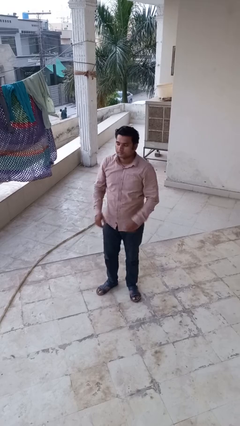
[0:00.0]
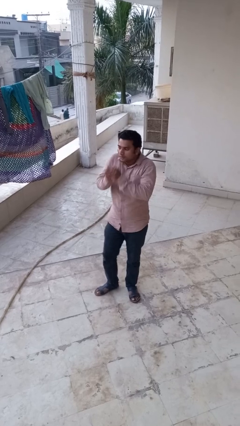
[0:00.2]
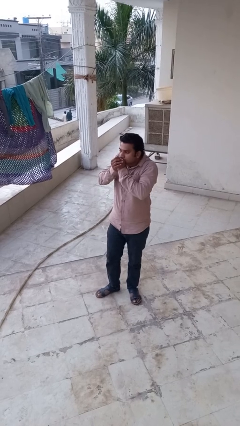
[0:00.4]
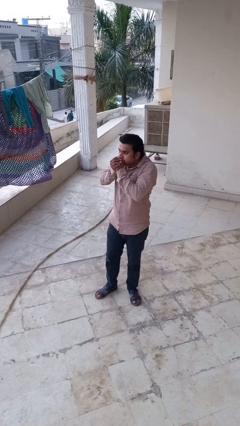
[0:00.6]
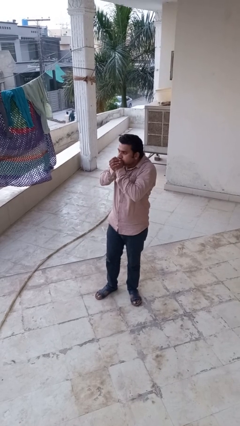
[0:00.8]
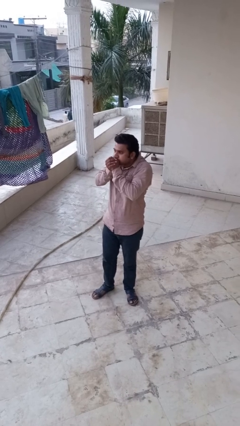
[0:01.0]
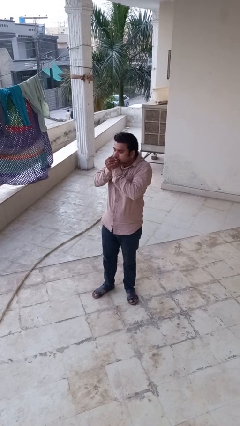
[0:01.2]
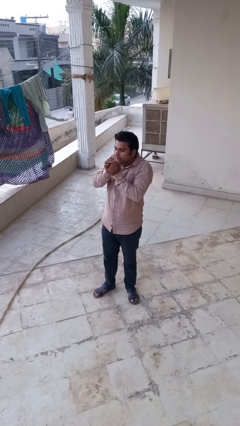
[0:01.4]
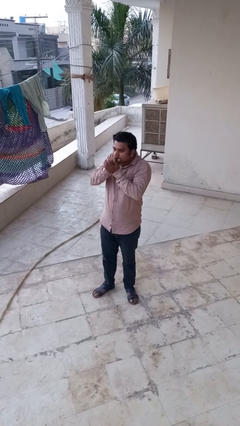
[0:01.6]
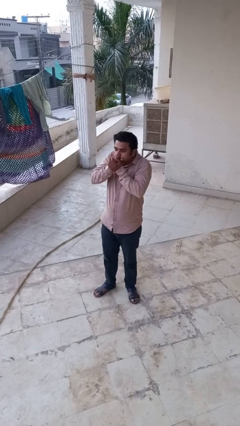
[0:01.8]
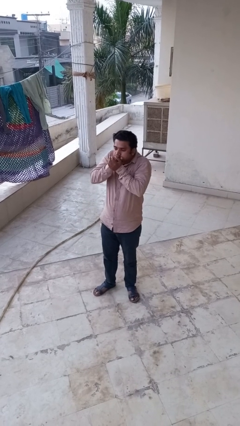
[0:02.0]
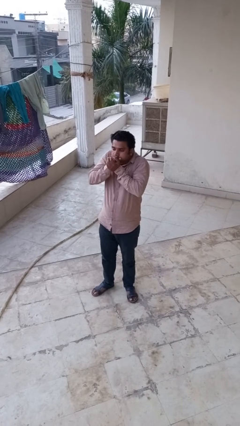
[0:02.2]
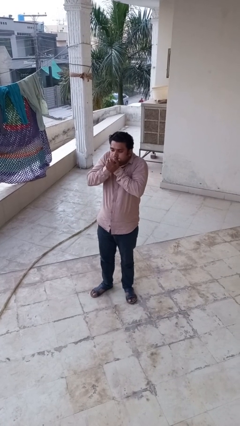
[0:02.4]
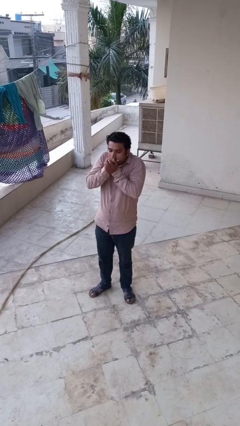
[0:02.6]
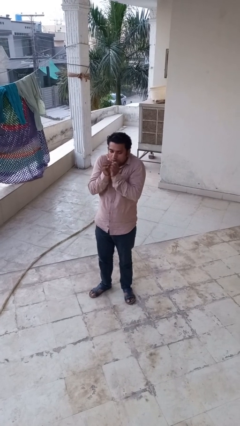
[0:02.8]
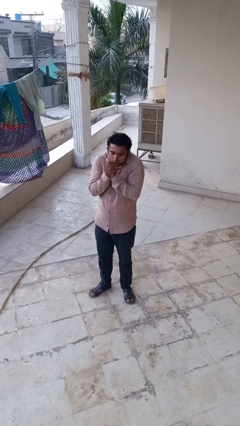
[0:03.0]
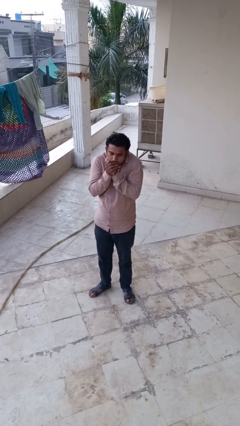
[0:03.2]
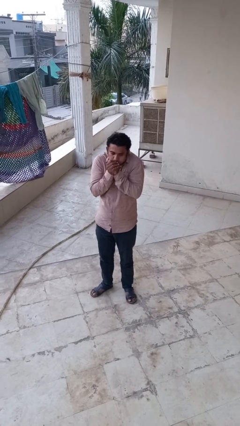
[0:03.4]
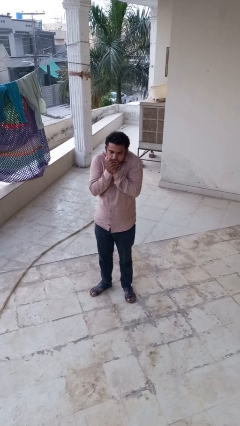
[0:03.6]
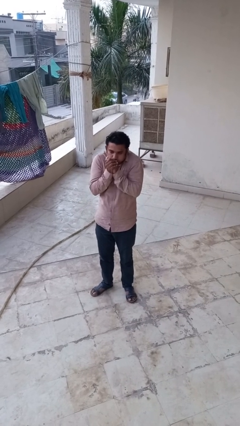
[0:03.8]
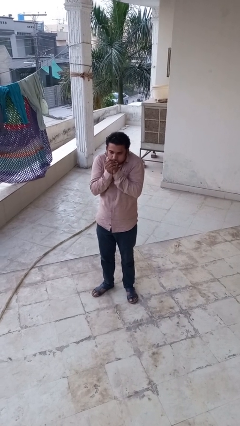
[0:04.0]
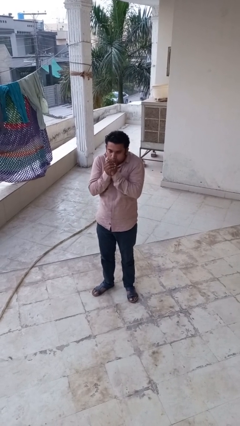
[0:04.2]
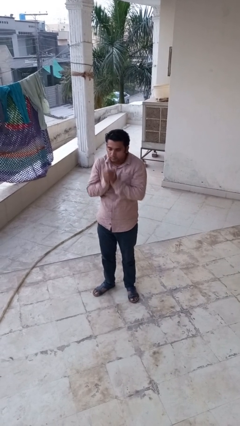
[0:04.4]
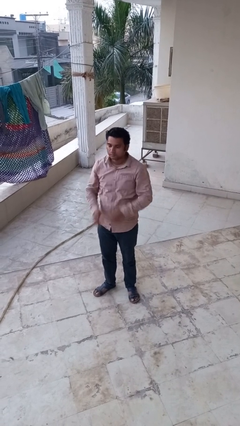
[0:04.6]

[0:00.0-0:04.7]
person blows into hands

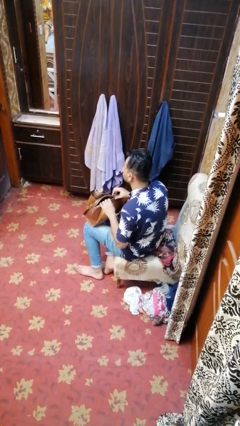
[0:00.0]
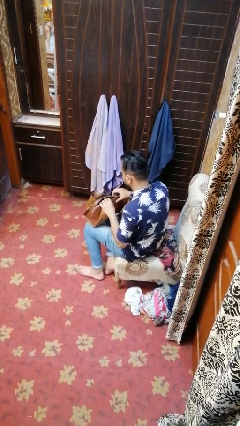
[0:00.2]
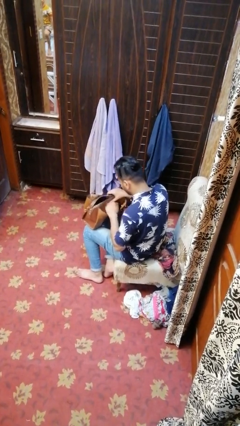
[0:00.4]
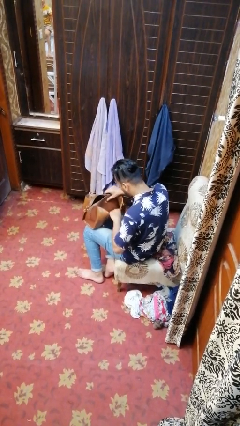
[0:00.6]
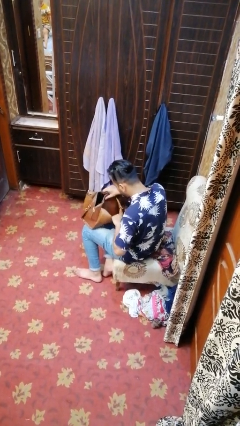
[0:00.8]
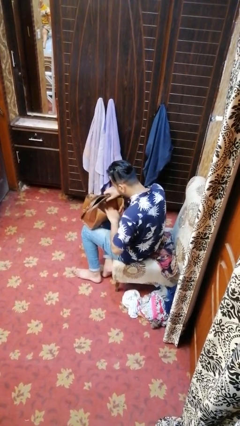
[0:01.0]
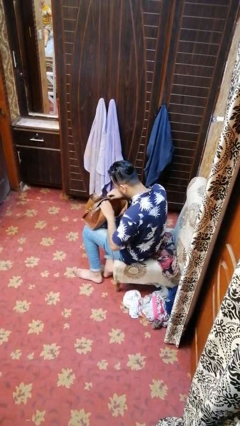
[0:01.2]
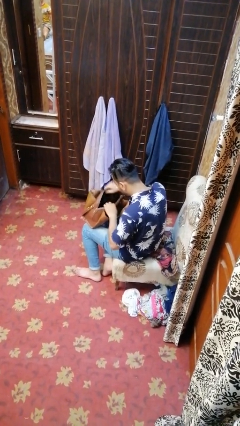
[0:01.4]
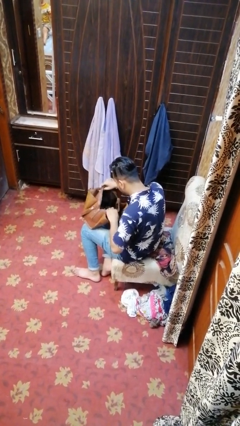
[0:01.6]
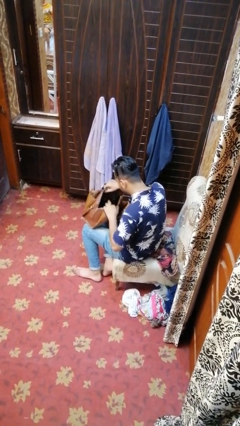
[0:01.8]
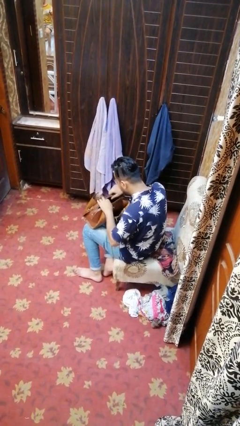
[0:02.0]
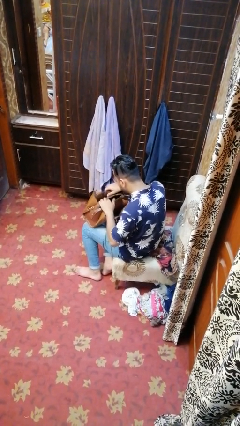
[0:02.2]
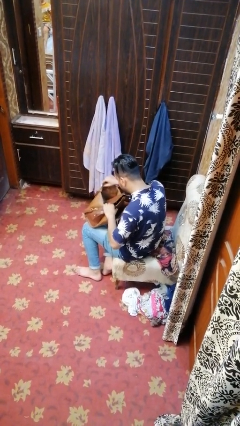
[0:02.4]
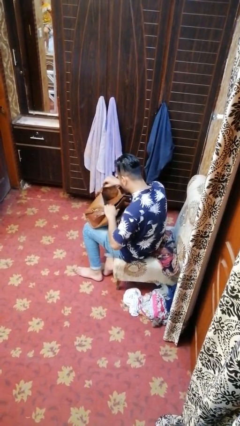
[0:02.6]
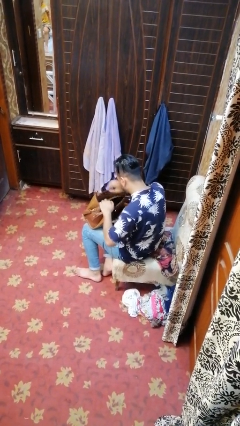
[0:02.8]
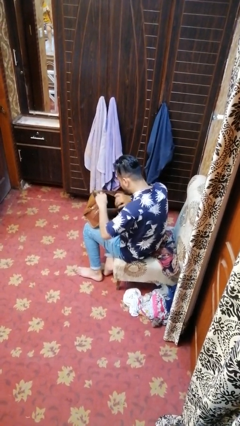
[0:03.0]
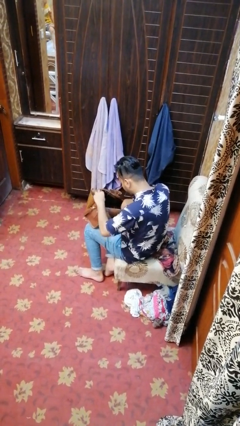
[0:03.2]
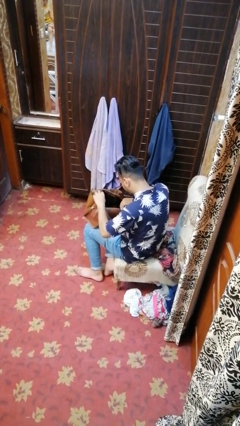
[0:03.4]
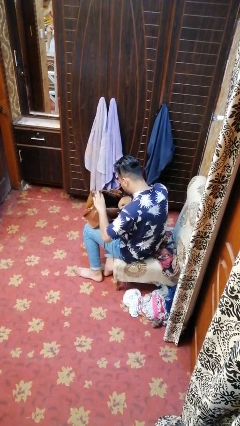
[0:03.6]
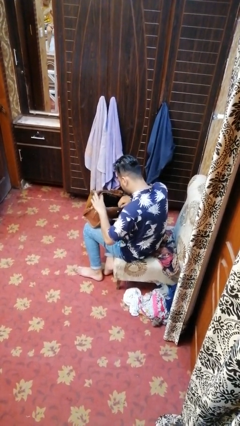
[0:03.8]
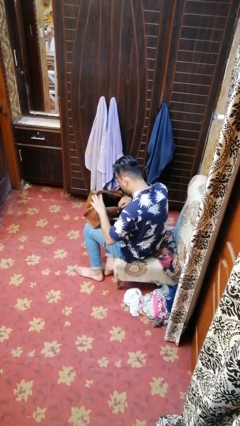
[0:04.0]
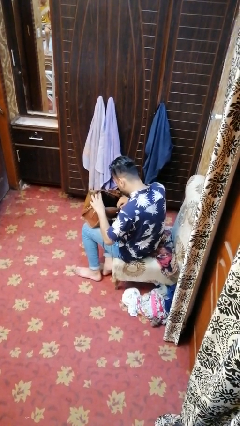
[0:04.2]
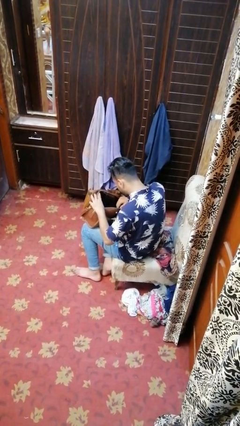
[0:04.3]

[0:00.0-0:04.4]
person searches in purse

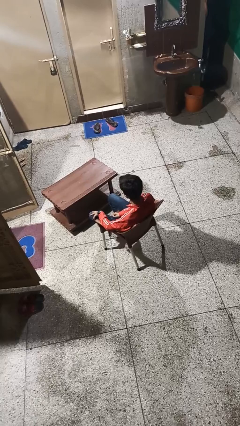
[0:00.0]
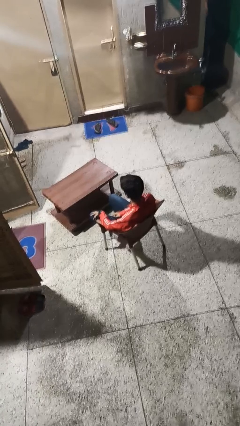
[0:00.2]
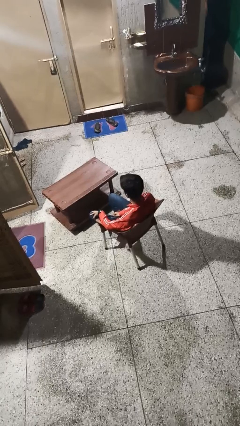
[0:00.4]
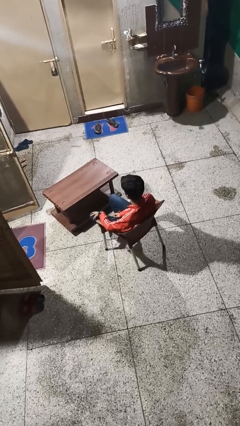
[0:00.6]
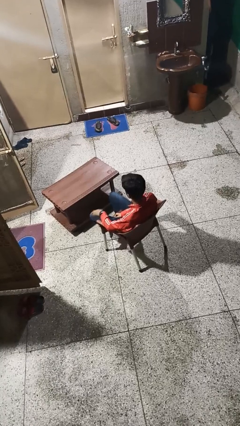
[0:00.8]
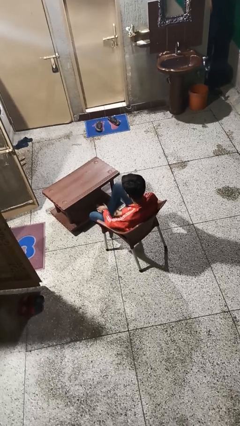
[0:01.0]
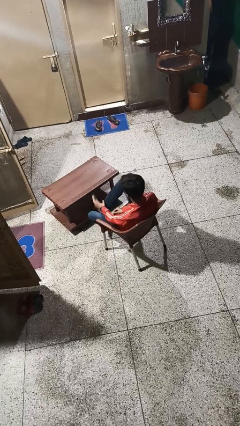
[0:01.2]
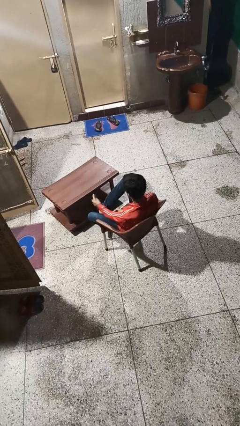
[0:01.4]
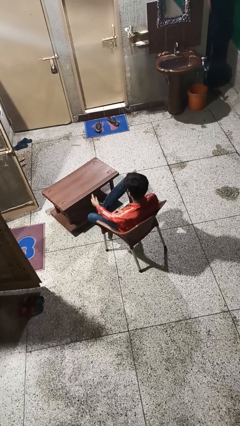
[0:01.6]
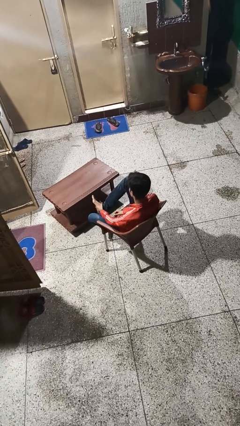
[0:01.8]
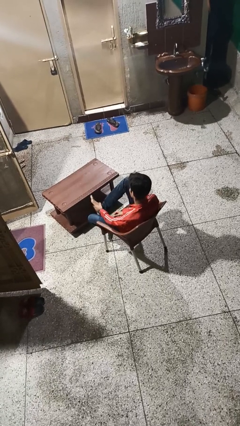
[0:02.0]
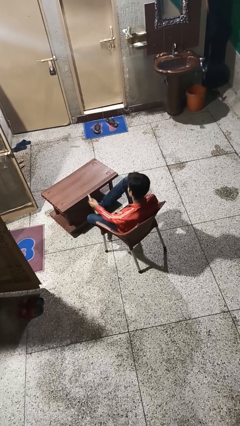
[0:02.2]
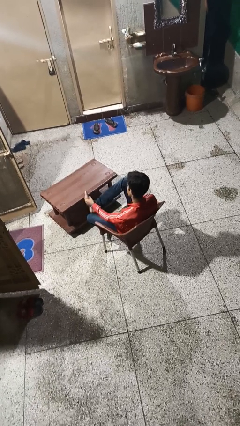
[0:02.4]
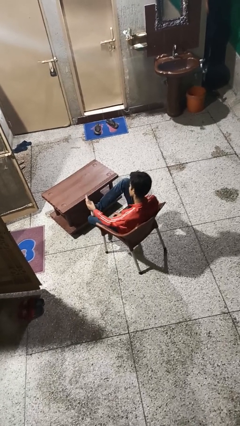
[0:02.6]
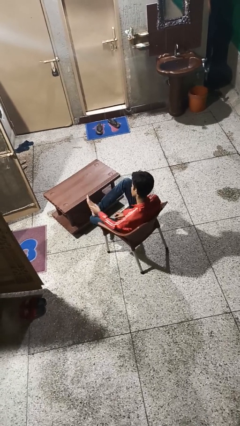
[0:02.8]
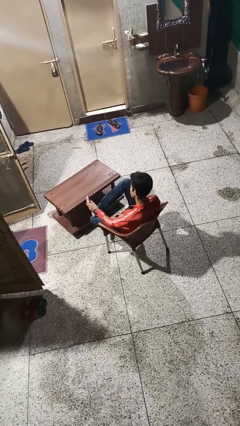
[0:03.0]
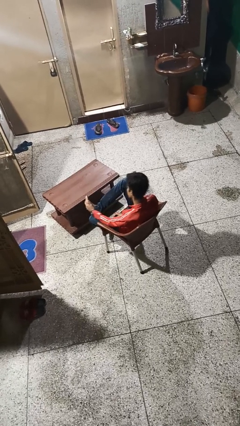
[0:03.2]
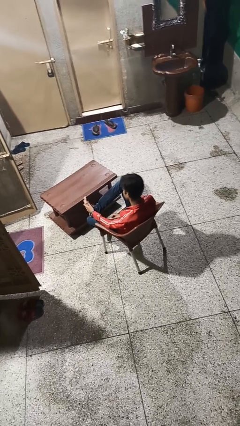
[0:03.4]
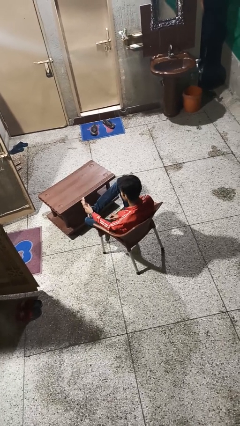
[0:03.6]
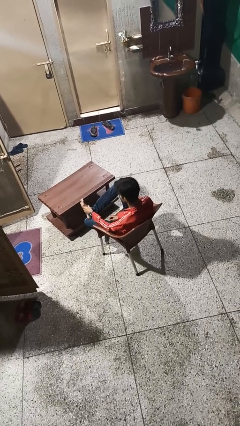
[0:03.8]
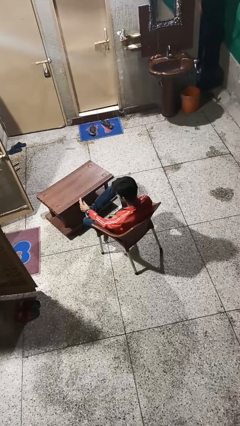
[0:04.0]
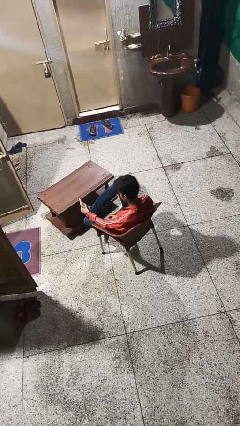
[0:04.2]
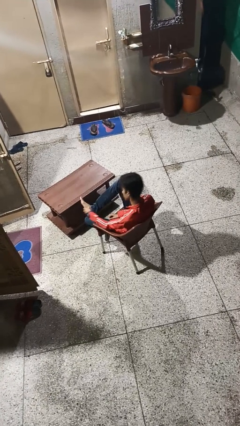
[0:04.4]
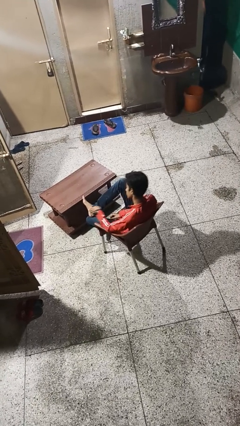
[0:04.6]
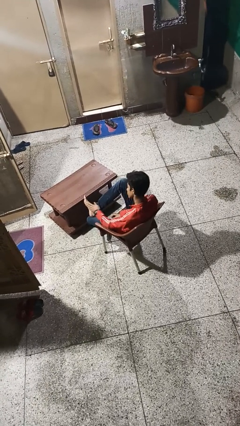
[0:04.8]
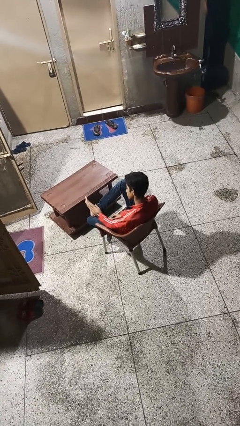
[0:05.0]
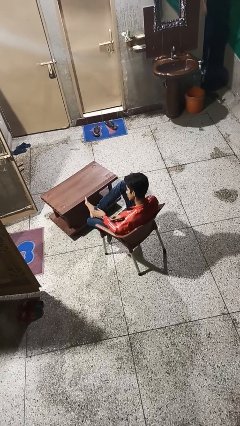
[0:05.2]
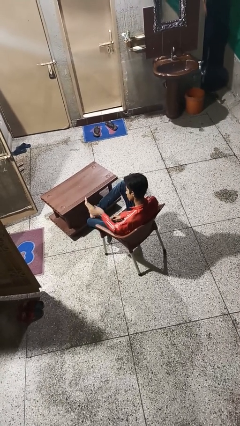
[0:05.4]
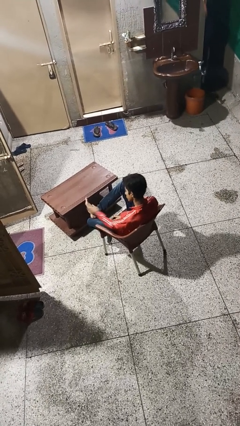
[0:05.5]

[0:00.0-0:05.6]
person rubs foot

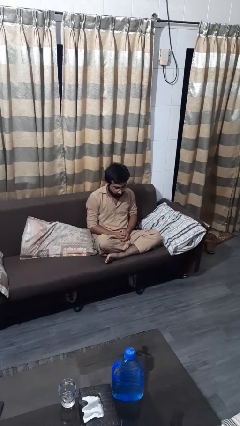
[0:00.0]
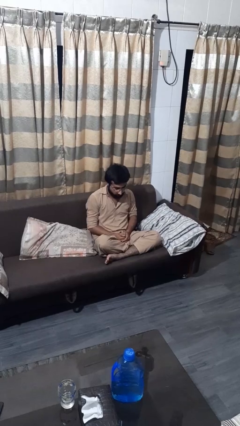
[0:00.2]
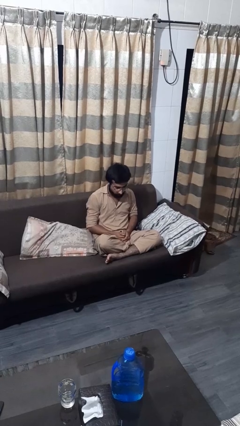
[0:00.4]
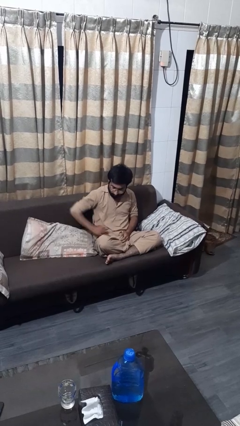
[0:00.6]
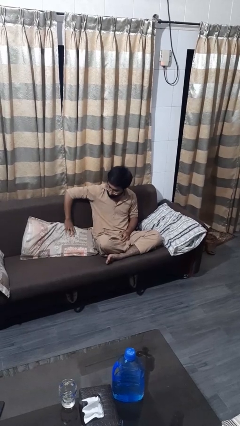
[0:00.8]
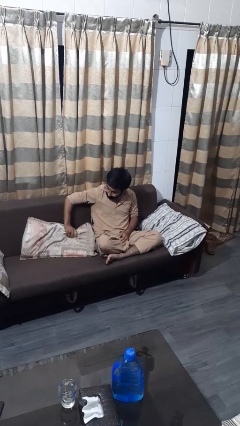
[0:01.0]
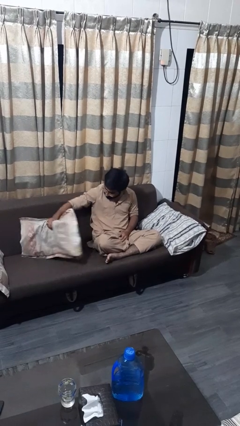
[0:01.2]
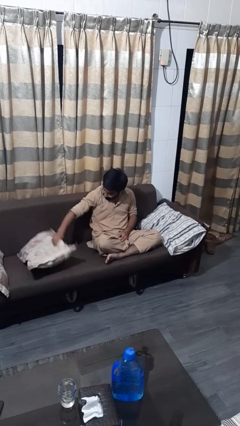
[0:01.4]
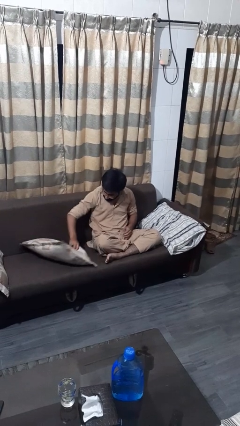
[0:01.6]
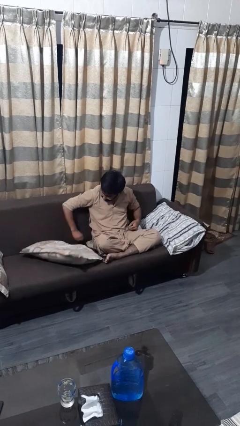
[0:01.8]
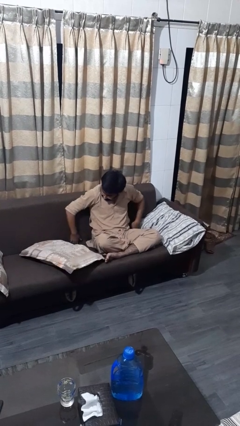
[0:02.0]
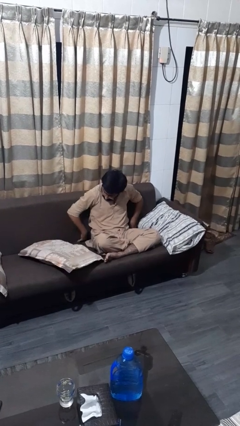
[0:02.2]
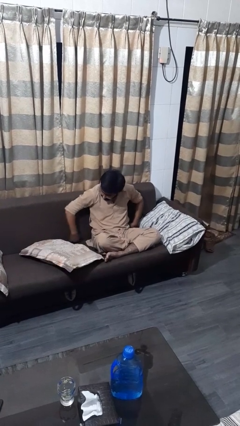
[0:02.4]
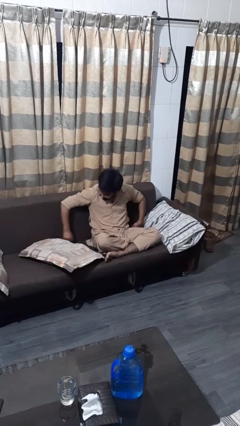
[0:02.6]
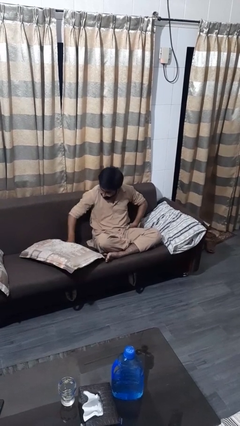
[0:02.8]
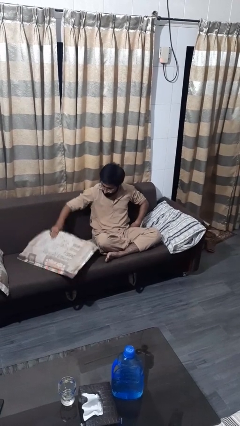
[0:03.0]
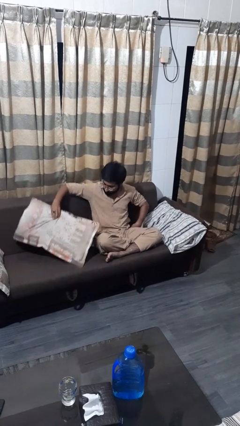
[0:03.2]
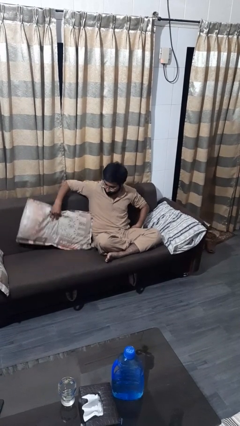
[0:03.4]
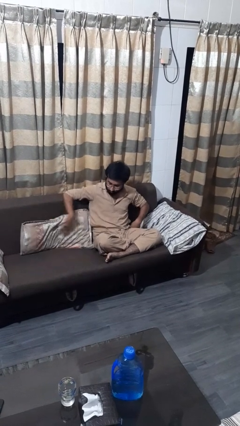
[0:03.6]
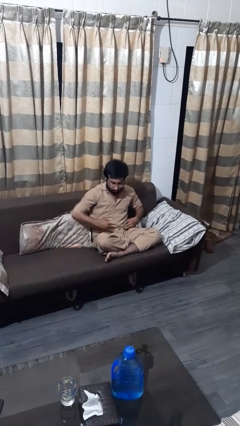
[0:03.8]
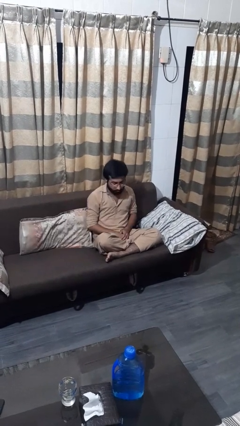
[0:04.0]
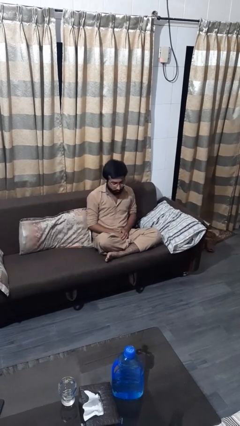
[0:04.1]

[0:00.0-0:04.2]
person searches in couch
